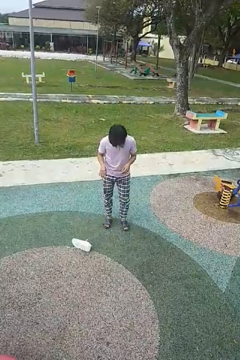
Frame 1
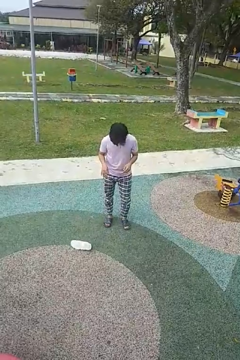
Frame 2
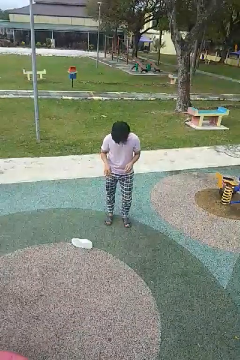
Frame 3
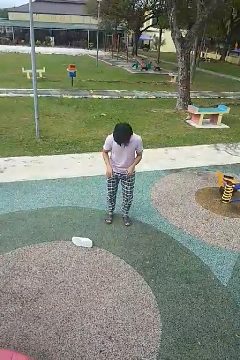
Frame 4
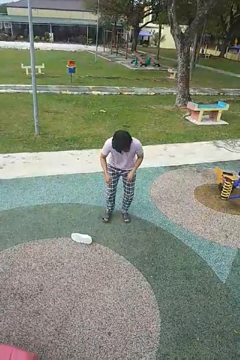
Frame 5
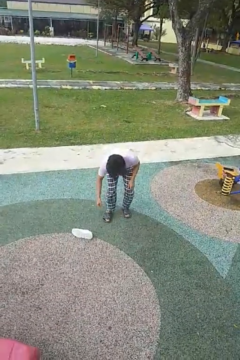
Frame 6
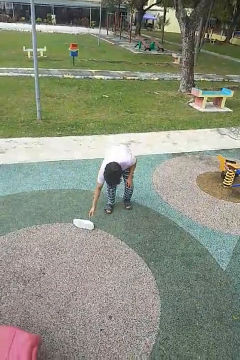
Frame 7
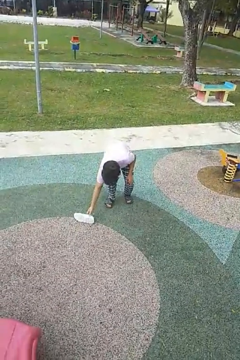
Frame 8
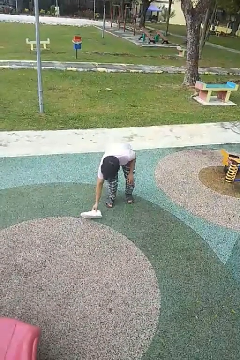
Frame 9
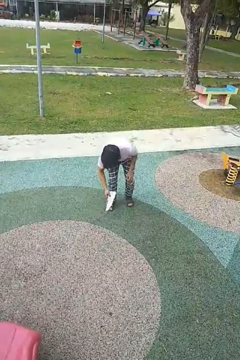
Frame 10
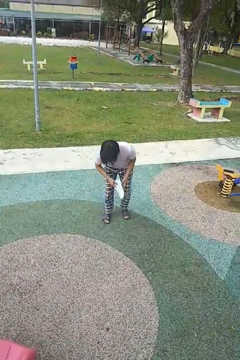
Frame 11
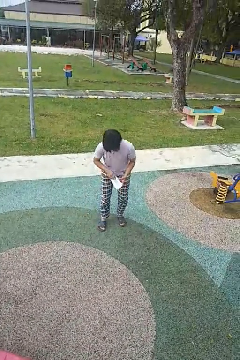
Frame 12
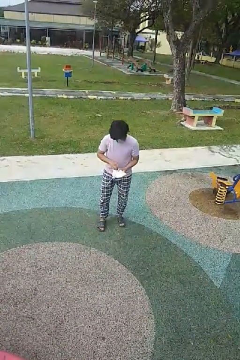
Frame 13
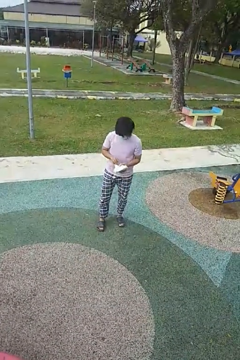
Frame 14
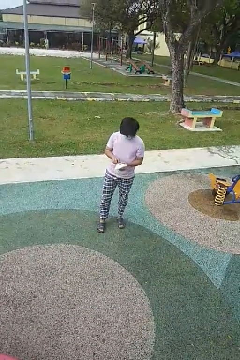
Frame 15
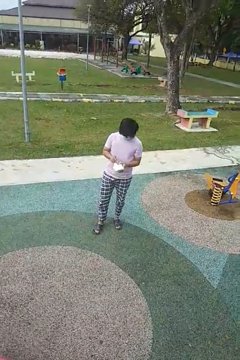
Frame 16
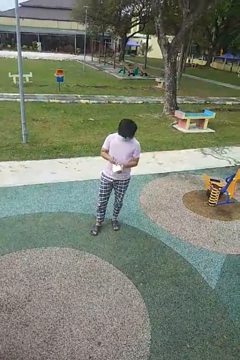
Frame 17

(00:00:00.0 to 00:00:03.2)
person picks up object from floor

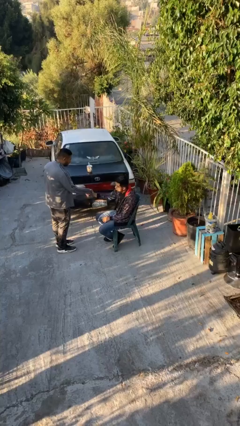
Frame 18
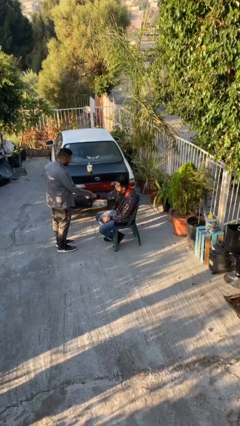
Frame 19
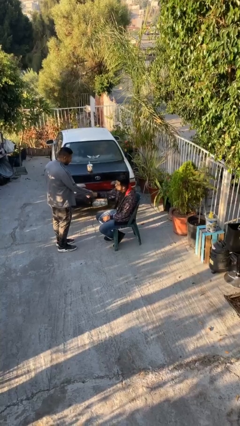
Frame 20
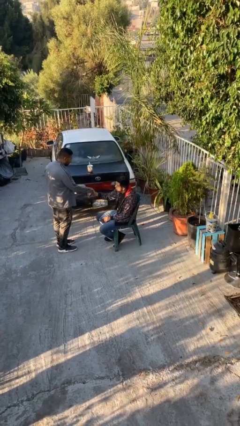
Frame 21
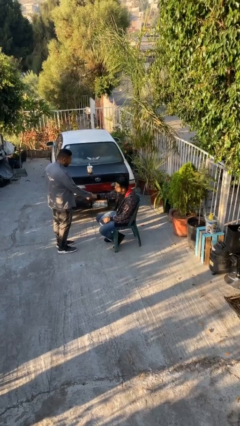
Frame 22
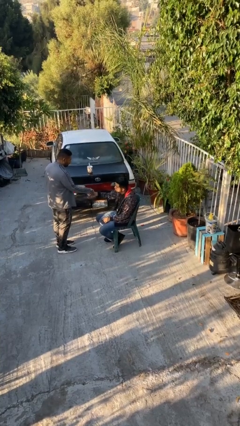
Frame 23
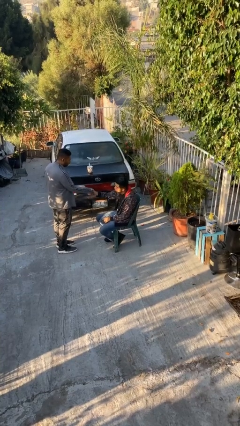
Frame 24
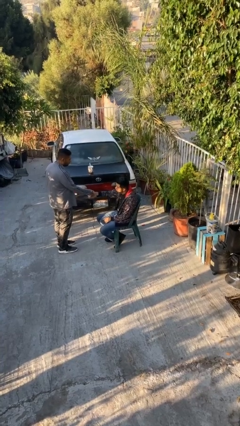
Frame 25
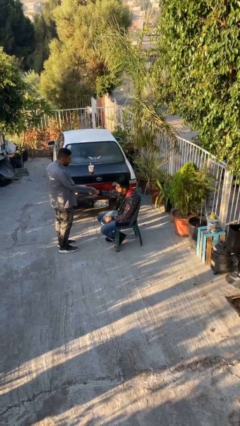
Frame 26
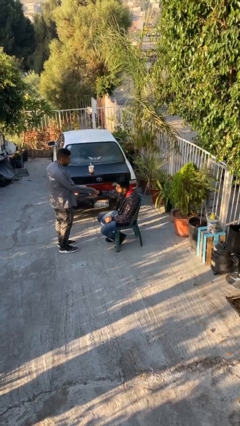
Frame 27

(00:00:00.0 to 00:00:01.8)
person shakes hand

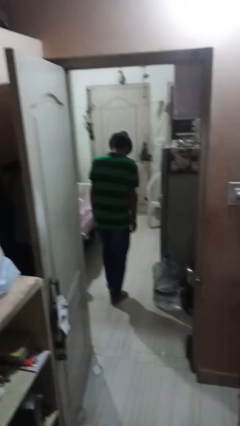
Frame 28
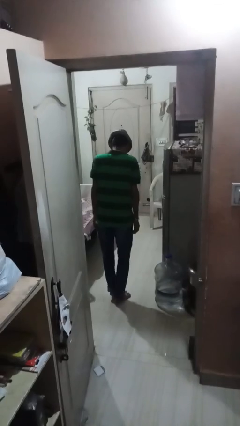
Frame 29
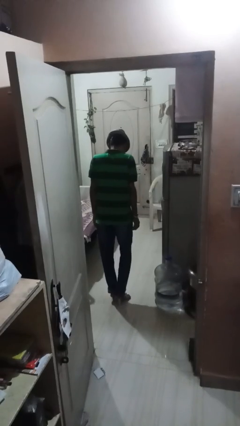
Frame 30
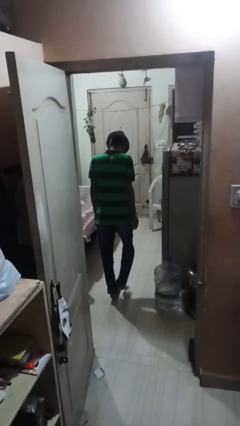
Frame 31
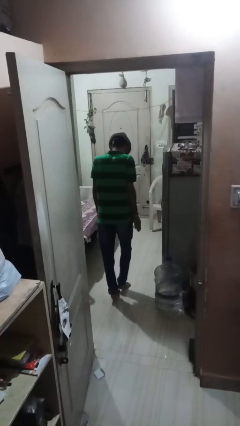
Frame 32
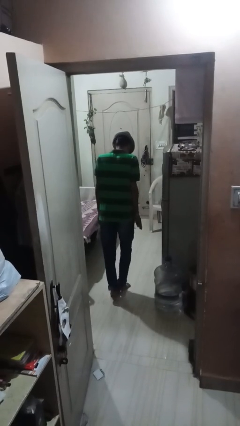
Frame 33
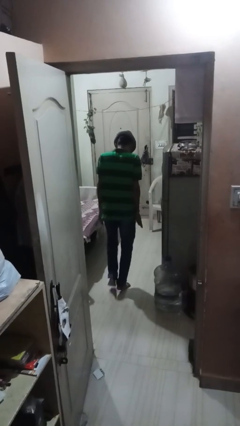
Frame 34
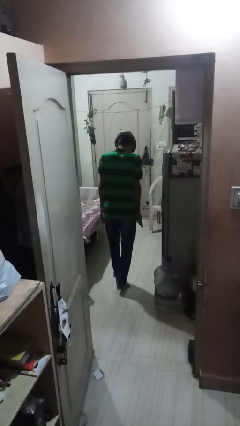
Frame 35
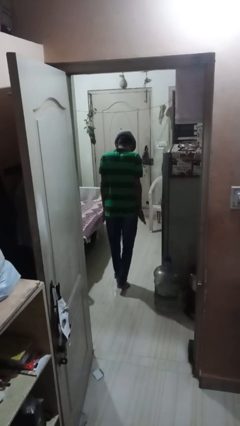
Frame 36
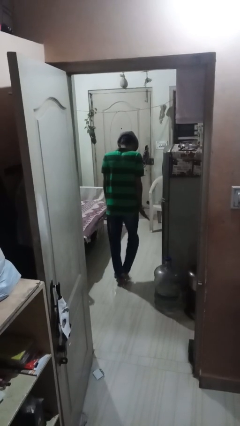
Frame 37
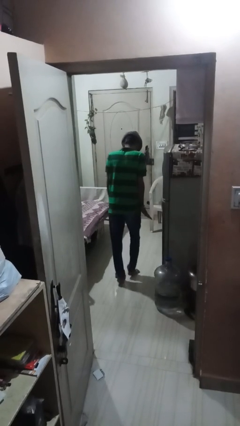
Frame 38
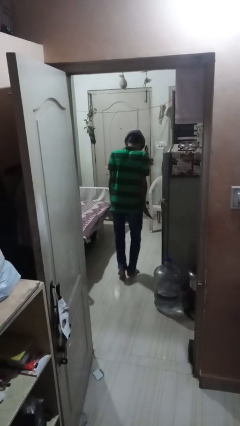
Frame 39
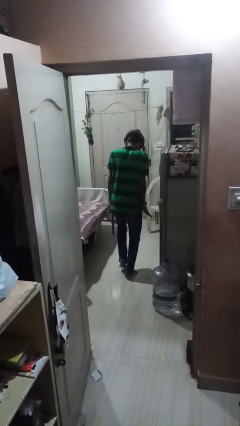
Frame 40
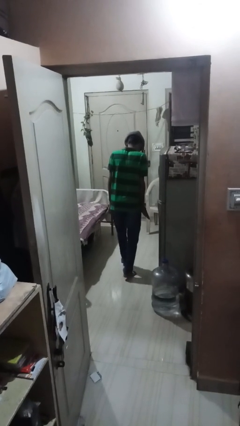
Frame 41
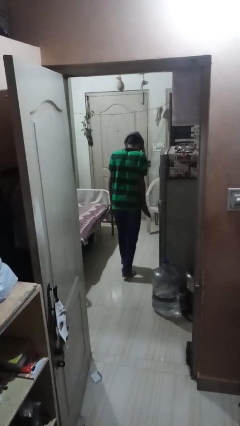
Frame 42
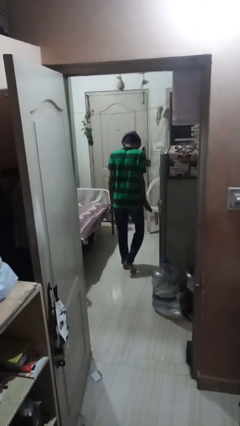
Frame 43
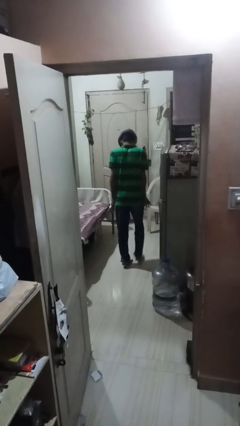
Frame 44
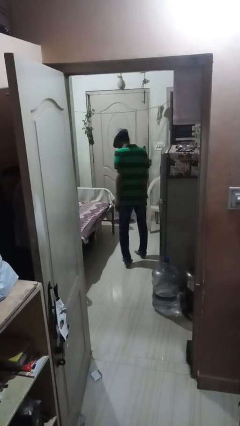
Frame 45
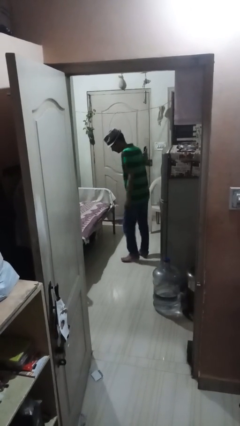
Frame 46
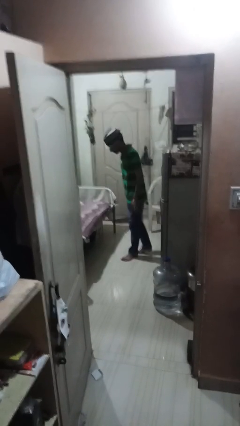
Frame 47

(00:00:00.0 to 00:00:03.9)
person walks tiptoe

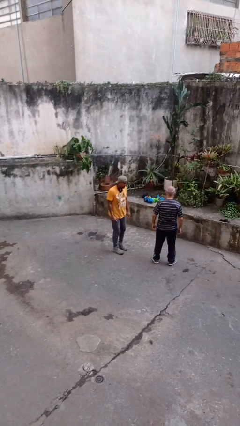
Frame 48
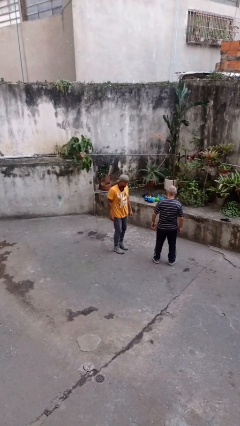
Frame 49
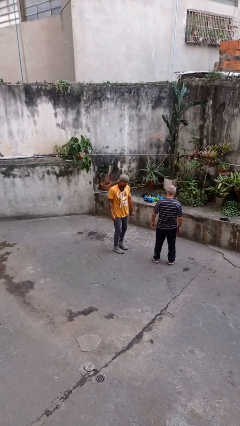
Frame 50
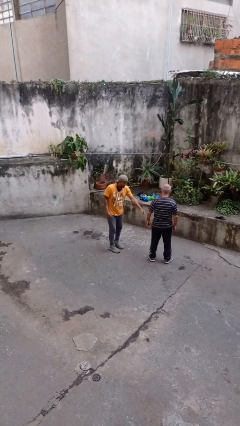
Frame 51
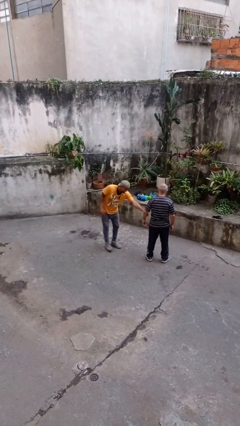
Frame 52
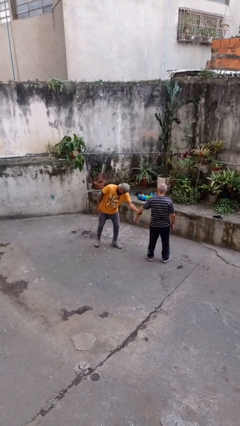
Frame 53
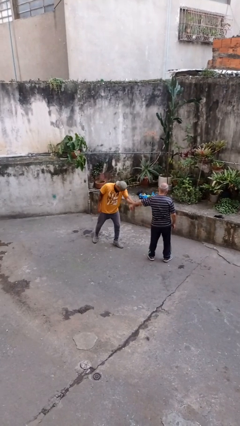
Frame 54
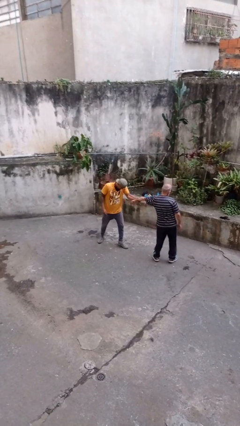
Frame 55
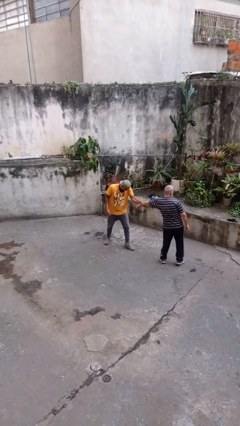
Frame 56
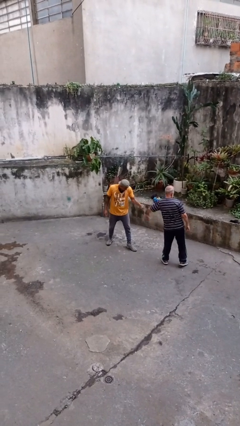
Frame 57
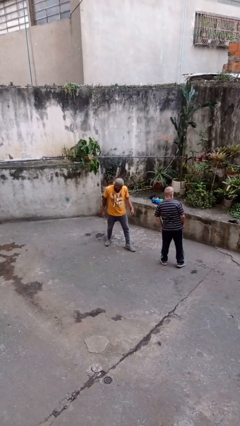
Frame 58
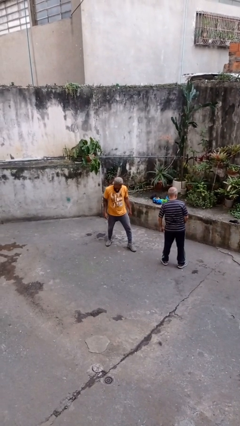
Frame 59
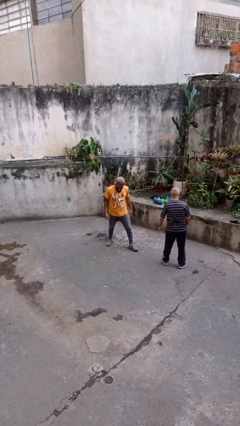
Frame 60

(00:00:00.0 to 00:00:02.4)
person grabs person by forearm

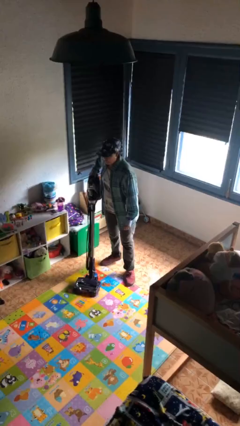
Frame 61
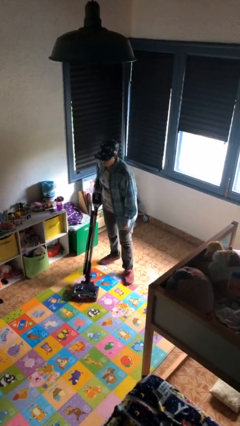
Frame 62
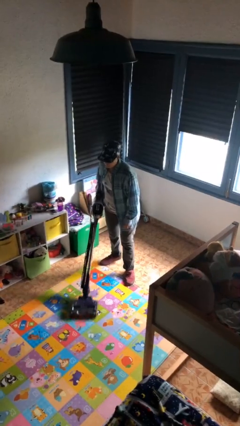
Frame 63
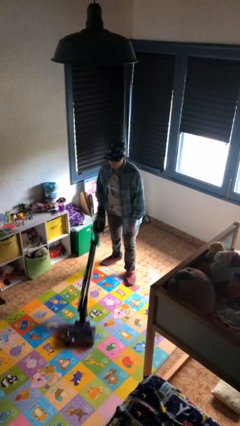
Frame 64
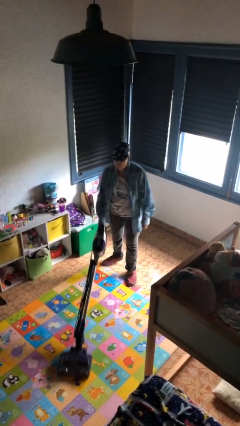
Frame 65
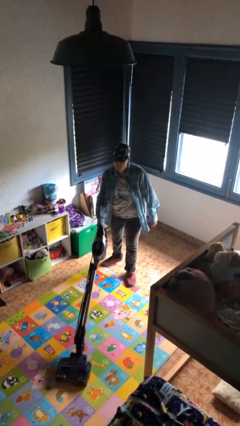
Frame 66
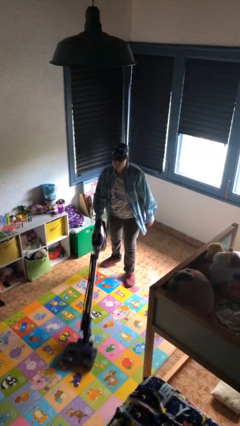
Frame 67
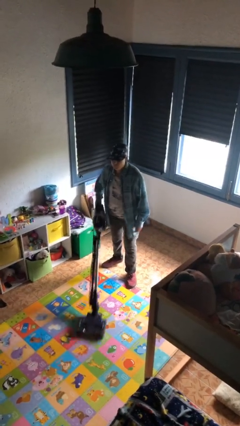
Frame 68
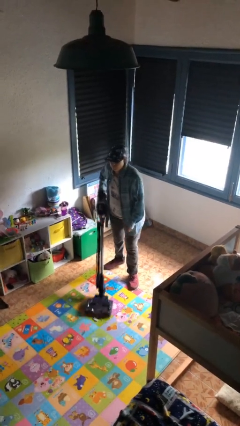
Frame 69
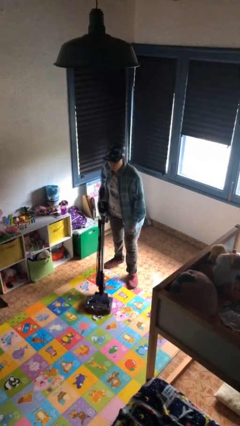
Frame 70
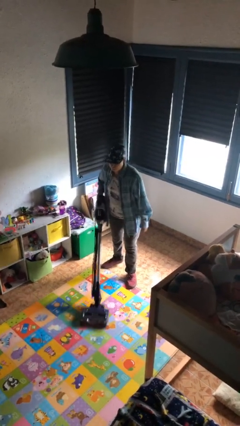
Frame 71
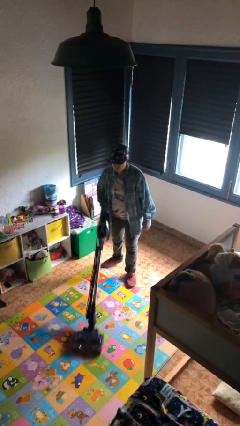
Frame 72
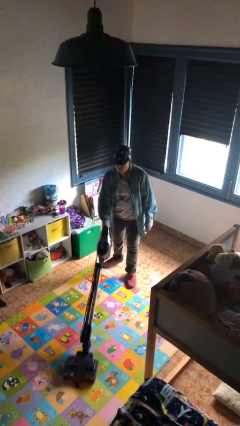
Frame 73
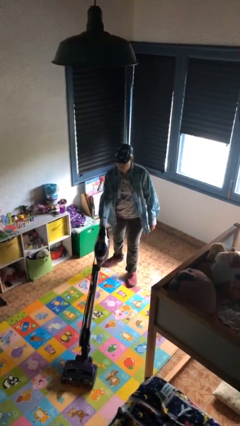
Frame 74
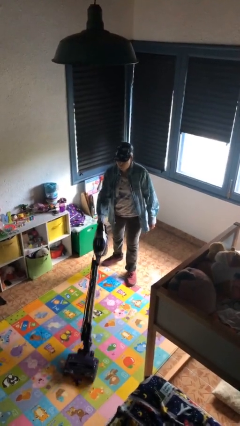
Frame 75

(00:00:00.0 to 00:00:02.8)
person vacuums carpet

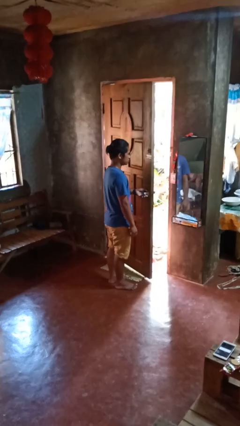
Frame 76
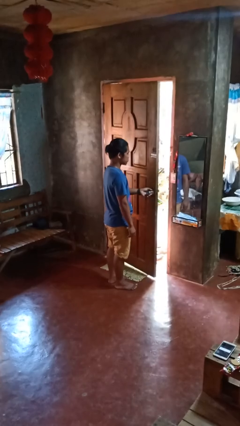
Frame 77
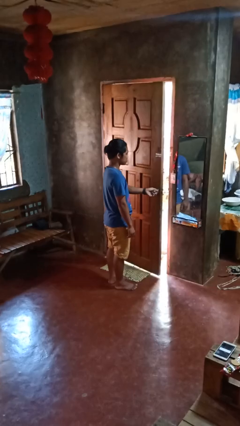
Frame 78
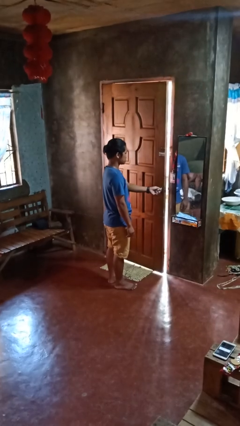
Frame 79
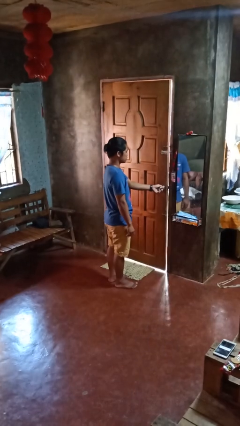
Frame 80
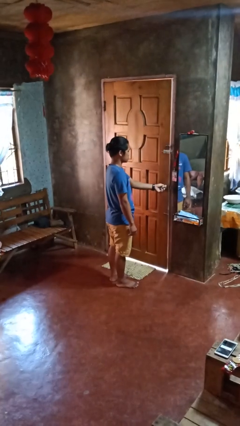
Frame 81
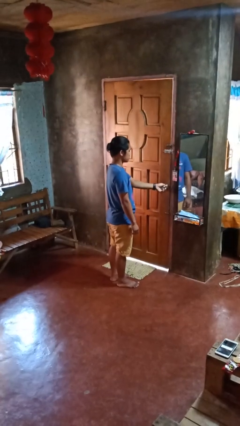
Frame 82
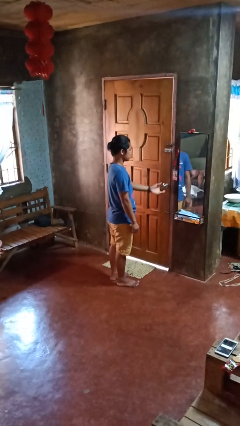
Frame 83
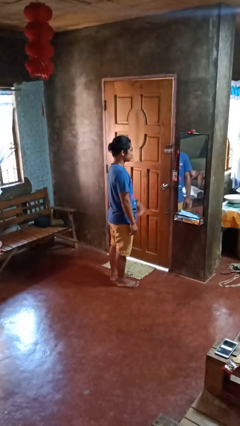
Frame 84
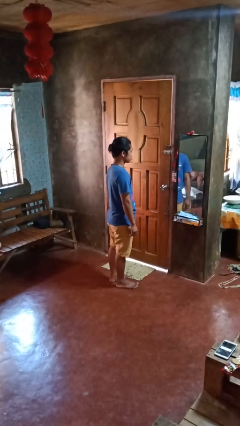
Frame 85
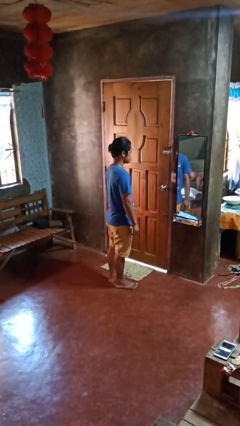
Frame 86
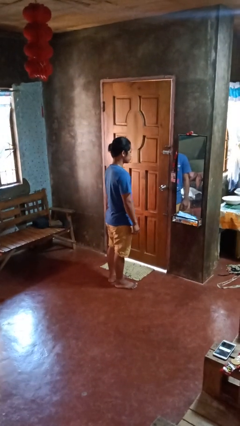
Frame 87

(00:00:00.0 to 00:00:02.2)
person closes facility door

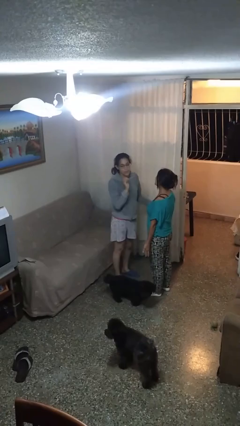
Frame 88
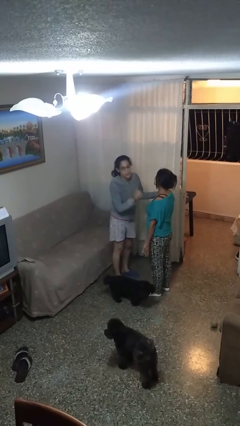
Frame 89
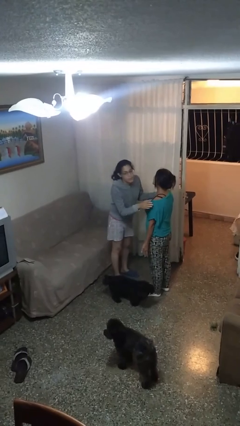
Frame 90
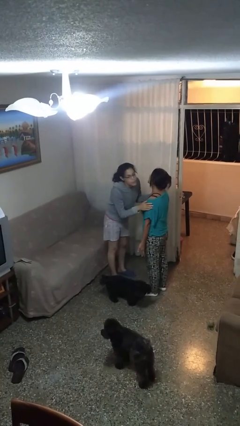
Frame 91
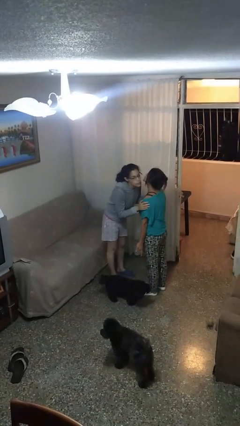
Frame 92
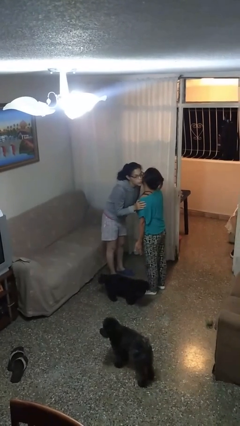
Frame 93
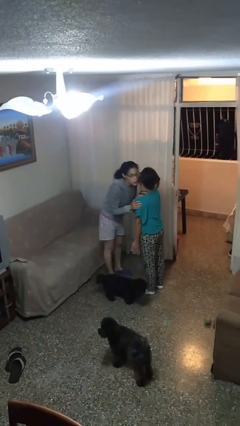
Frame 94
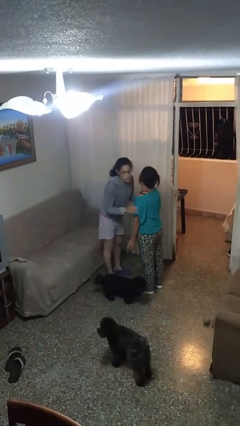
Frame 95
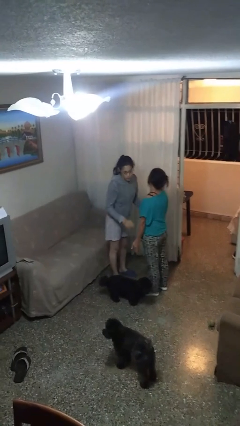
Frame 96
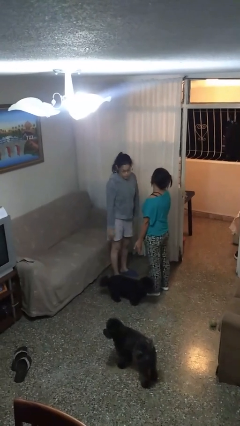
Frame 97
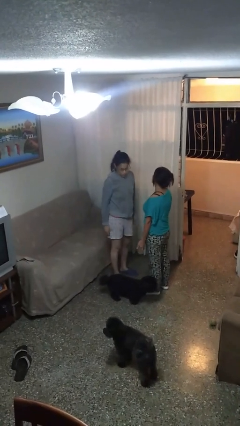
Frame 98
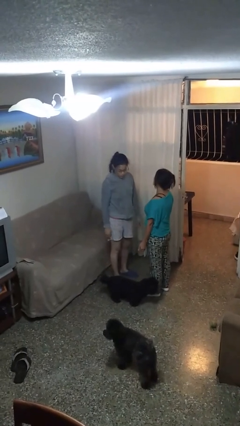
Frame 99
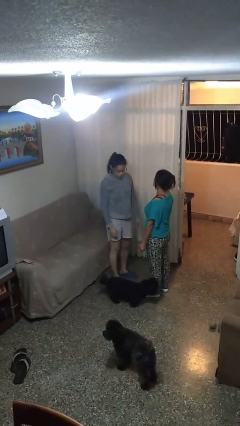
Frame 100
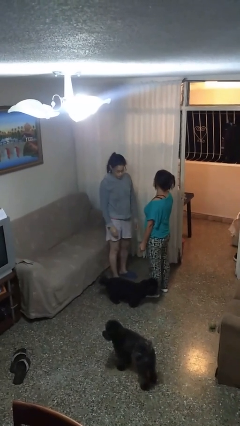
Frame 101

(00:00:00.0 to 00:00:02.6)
person kisses cheek of person
